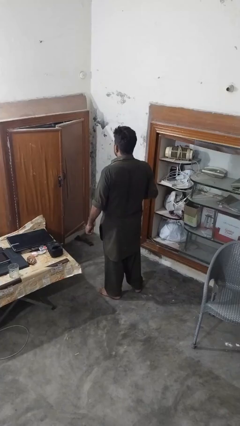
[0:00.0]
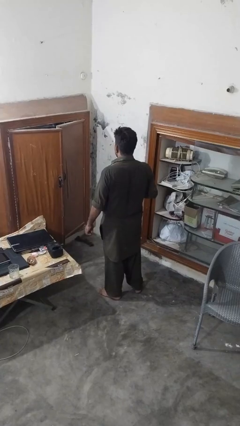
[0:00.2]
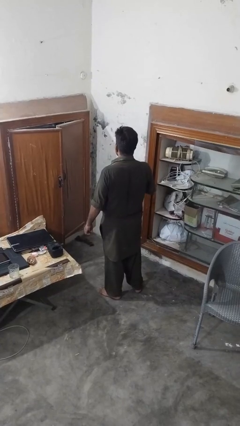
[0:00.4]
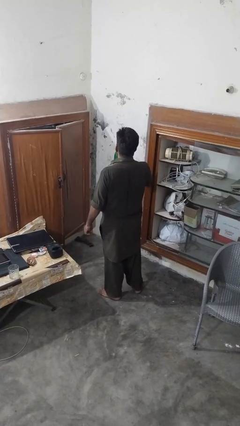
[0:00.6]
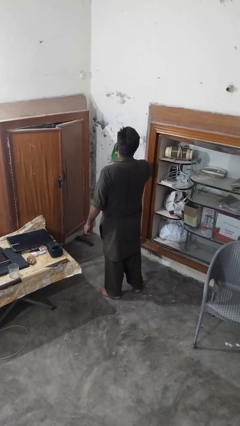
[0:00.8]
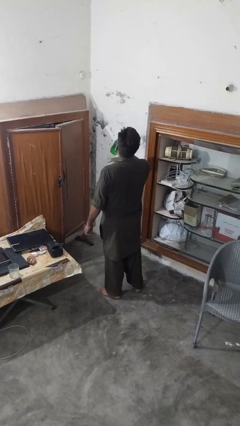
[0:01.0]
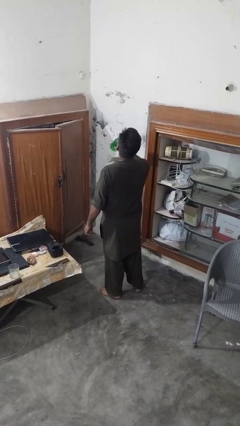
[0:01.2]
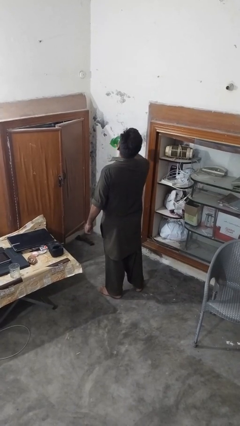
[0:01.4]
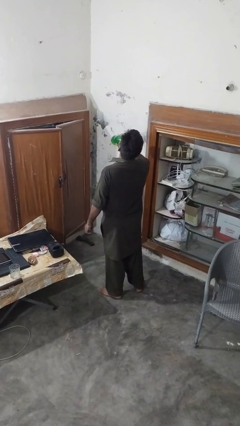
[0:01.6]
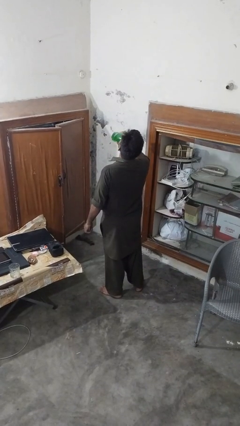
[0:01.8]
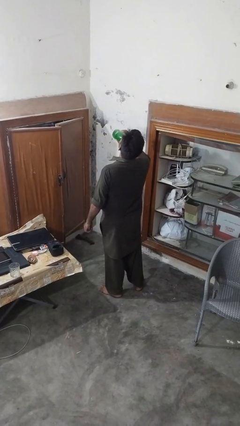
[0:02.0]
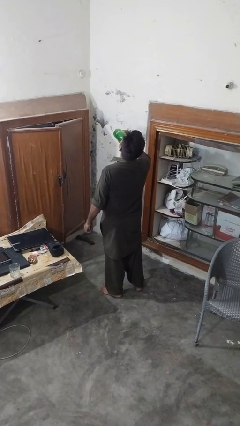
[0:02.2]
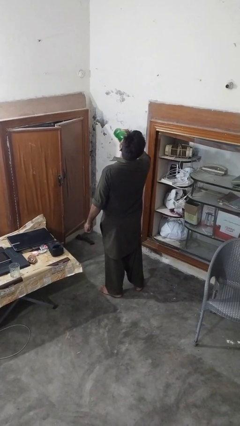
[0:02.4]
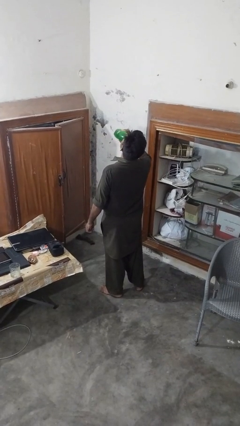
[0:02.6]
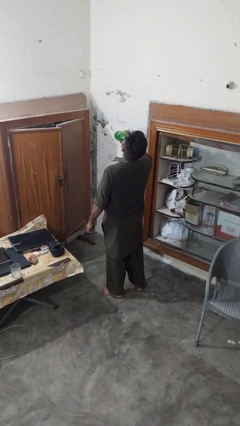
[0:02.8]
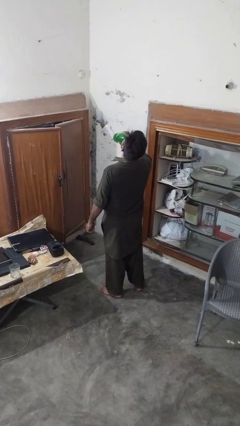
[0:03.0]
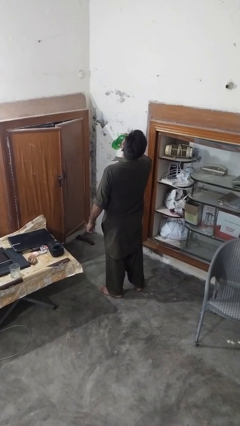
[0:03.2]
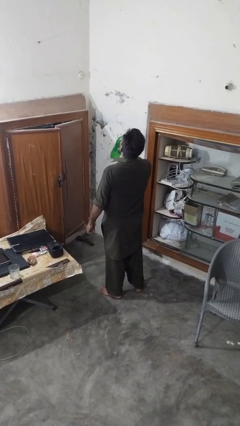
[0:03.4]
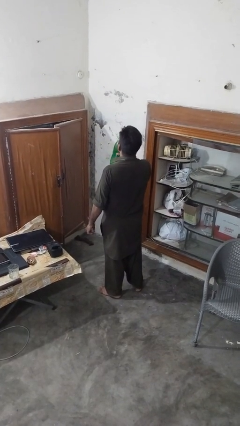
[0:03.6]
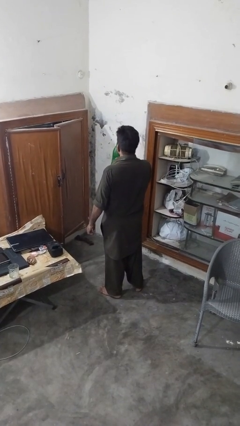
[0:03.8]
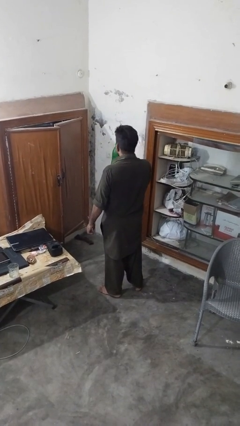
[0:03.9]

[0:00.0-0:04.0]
person drinks from bottle

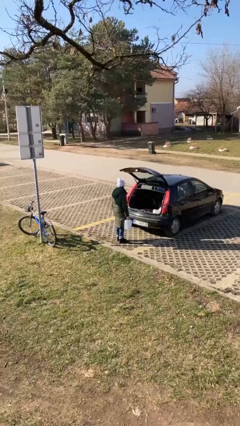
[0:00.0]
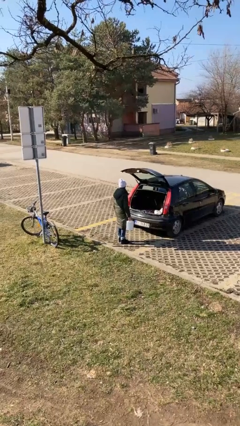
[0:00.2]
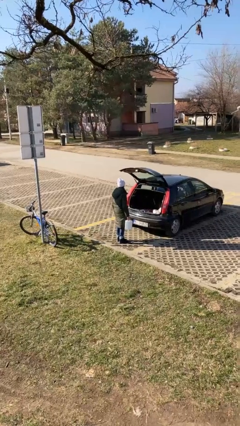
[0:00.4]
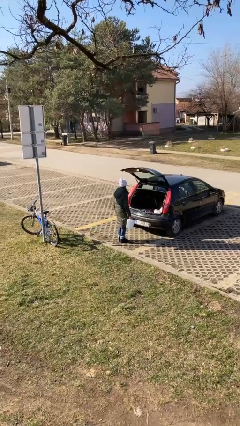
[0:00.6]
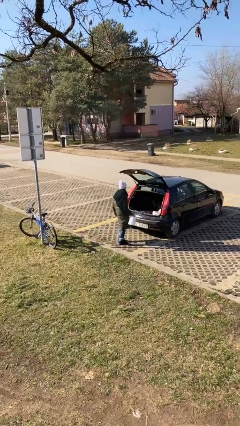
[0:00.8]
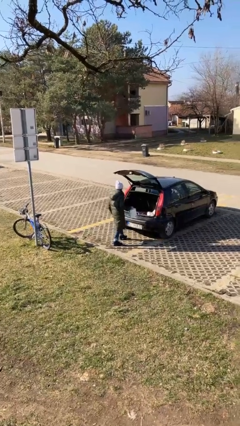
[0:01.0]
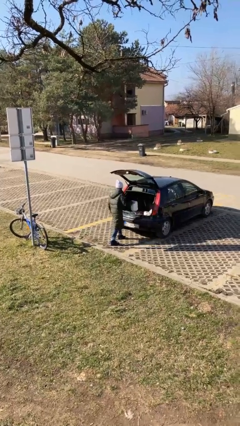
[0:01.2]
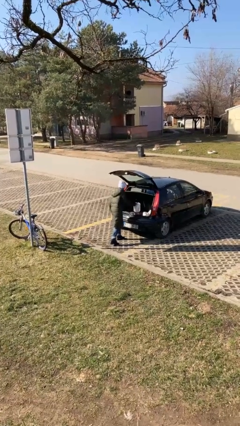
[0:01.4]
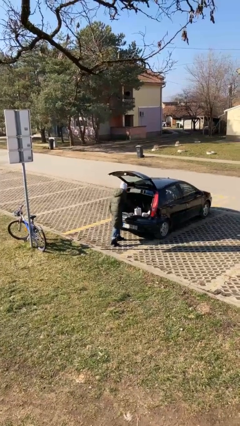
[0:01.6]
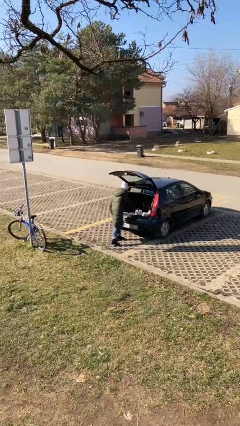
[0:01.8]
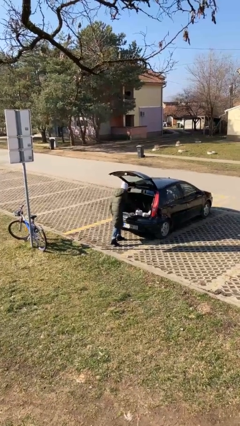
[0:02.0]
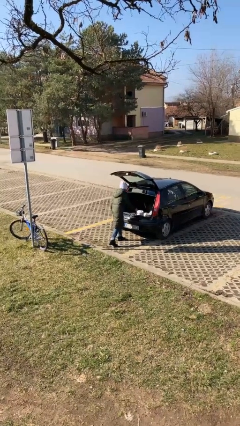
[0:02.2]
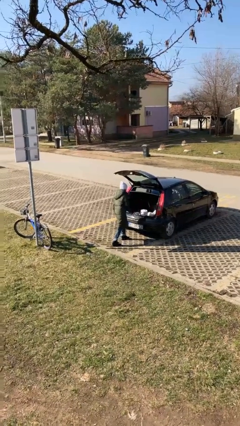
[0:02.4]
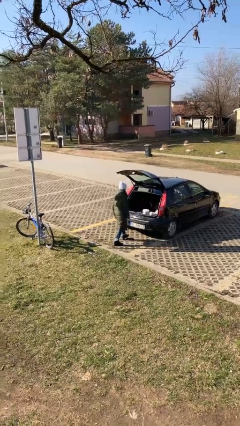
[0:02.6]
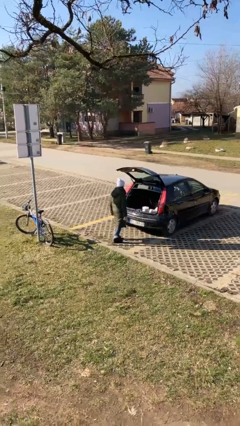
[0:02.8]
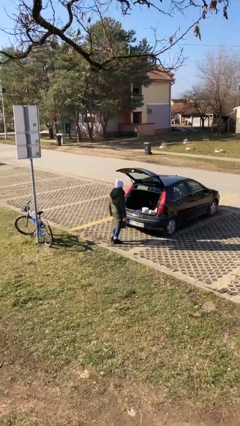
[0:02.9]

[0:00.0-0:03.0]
person loads car

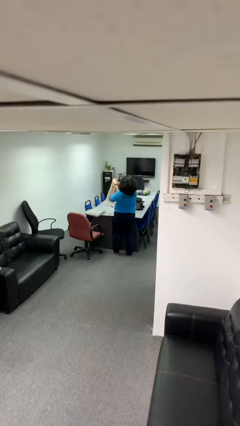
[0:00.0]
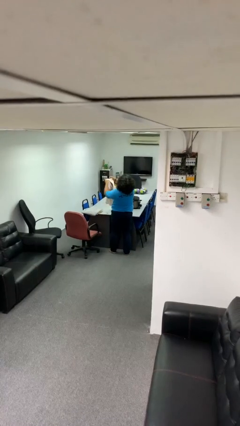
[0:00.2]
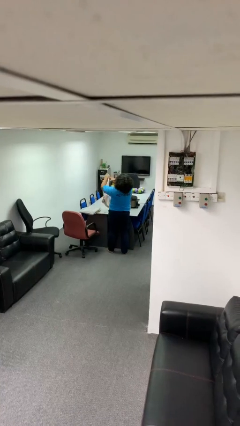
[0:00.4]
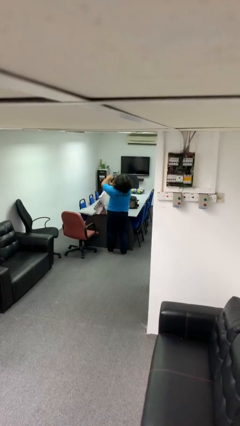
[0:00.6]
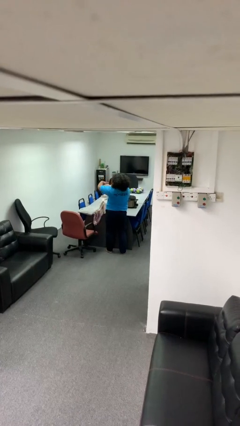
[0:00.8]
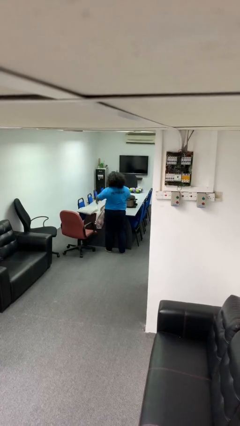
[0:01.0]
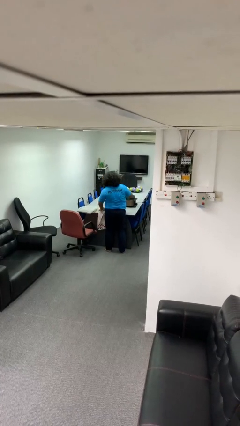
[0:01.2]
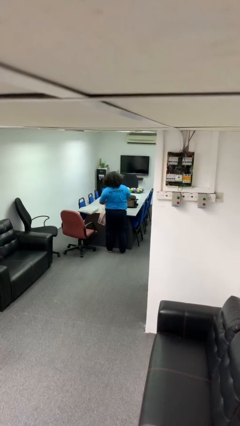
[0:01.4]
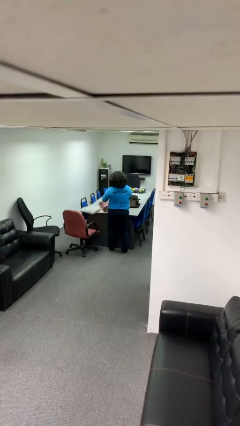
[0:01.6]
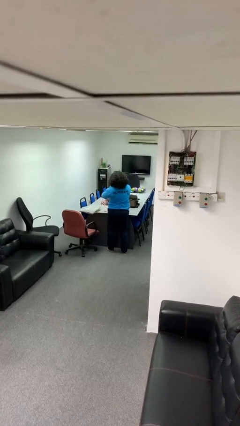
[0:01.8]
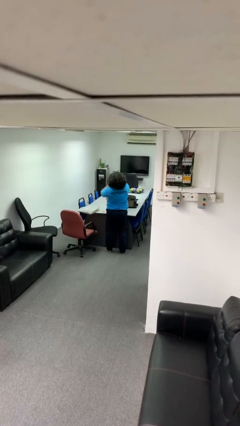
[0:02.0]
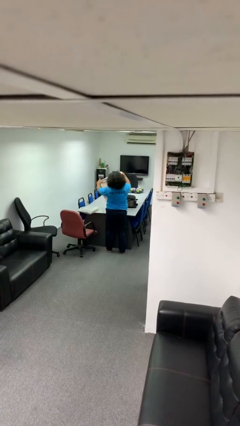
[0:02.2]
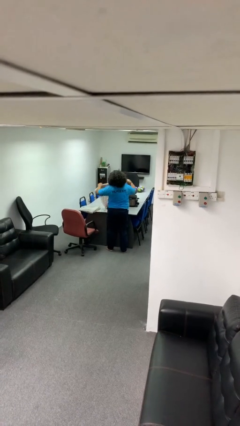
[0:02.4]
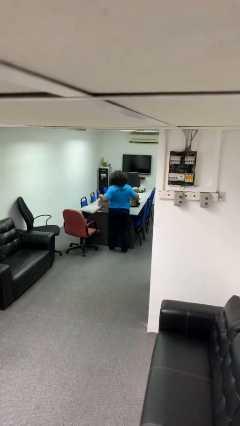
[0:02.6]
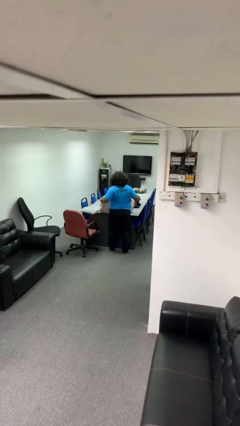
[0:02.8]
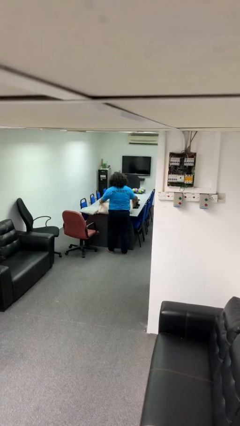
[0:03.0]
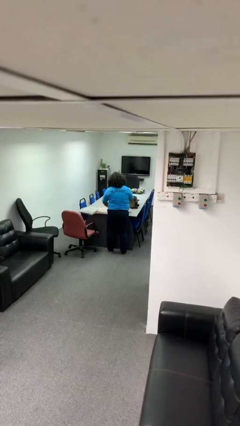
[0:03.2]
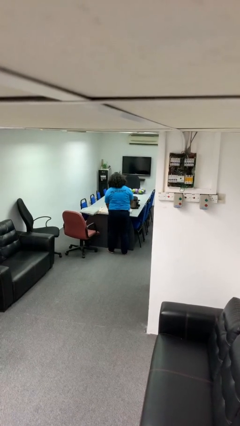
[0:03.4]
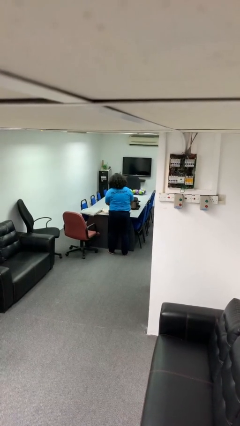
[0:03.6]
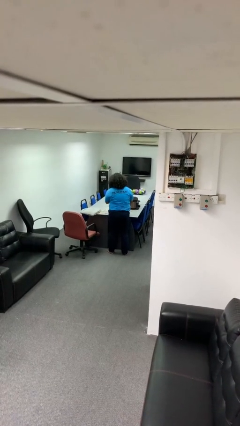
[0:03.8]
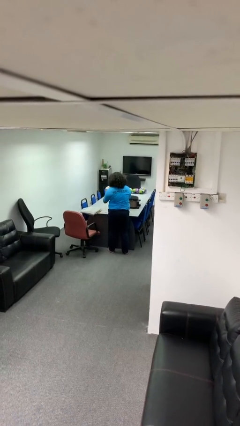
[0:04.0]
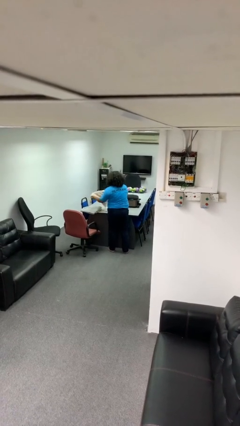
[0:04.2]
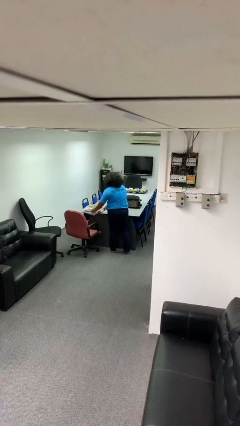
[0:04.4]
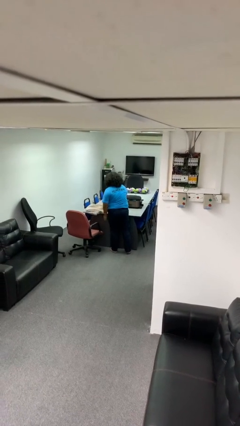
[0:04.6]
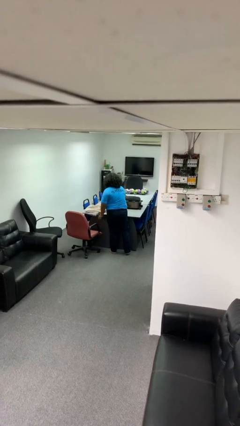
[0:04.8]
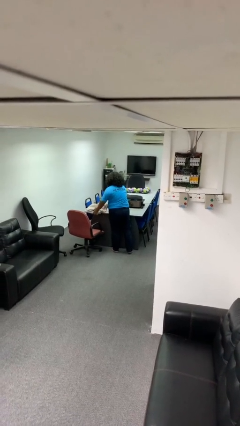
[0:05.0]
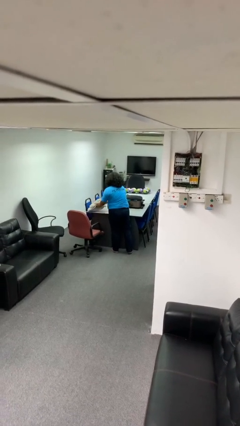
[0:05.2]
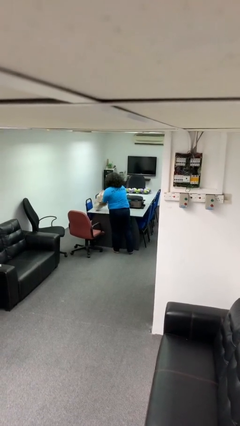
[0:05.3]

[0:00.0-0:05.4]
person folds towel

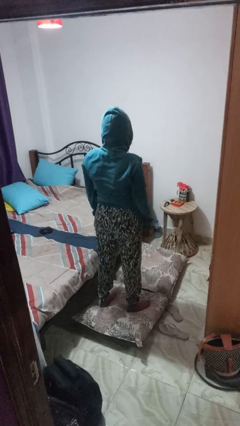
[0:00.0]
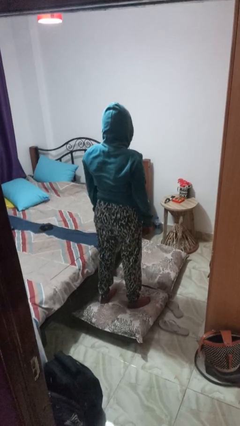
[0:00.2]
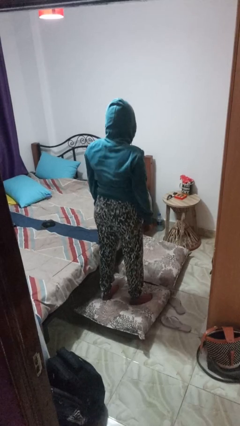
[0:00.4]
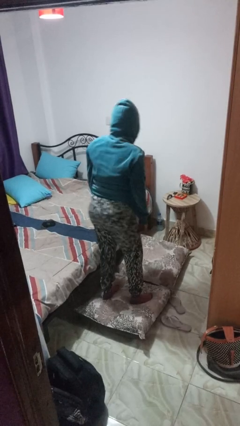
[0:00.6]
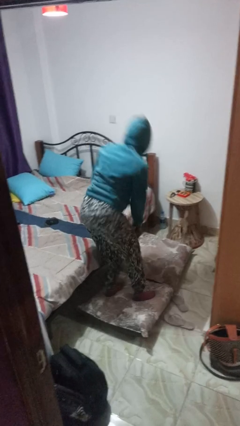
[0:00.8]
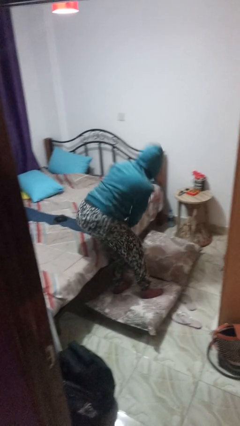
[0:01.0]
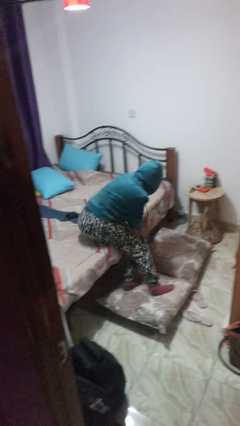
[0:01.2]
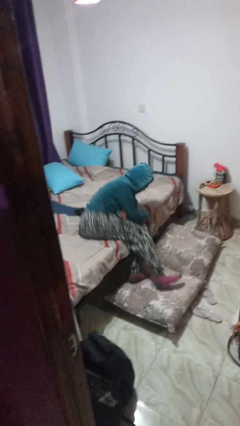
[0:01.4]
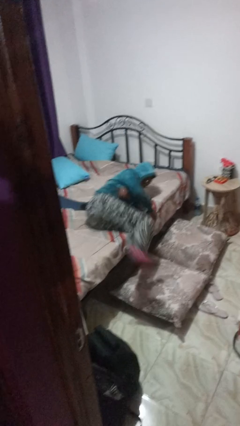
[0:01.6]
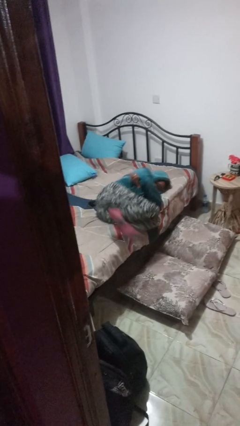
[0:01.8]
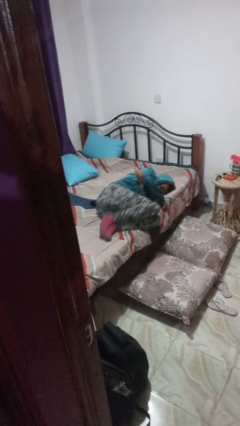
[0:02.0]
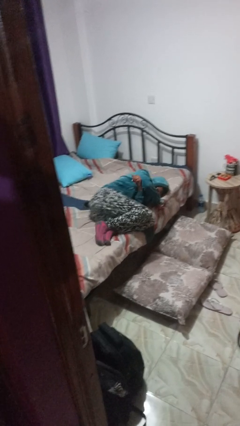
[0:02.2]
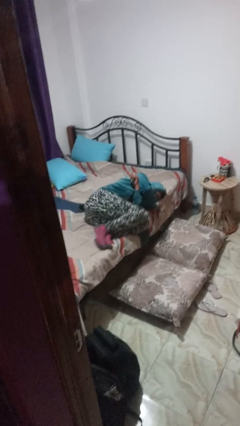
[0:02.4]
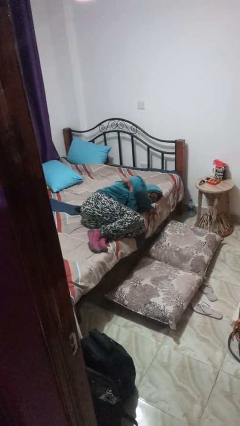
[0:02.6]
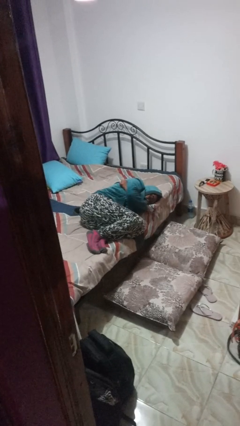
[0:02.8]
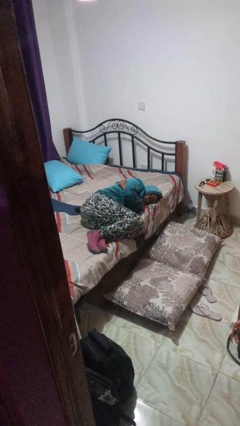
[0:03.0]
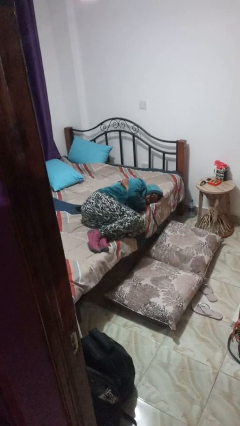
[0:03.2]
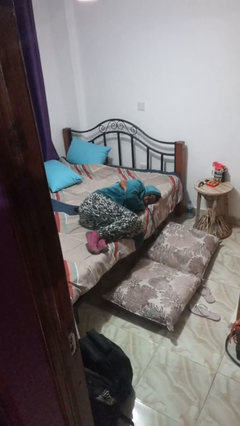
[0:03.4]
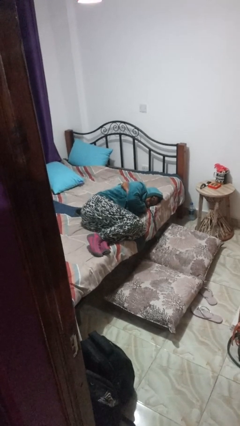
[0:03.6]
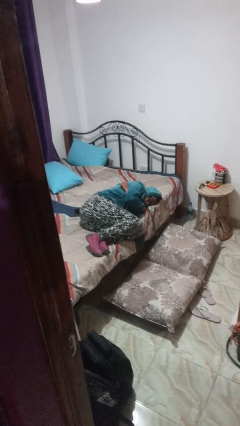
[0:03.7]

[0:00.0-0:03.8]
person lies down on bed

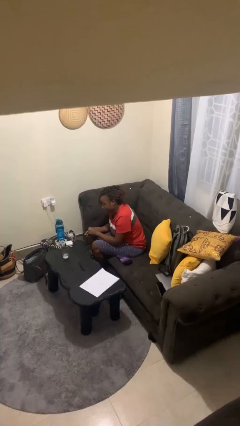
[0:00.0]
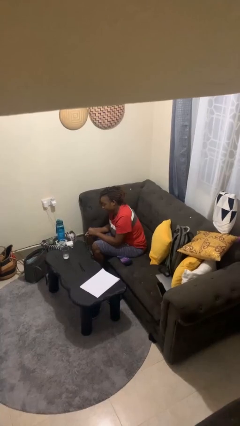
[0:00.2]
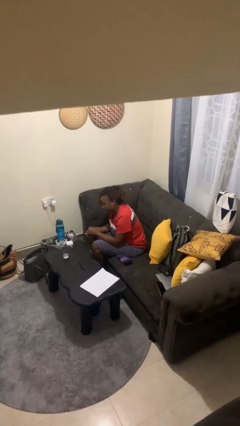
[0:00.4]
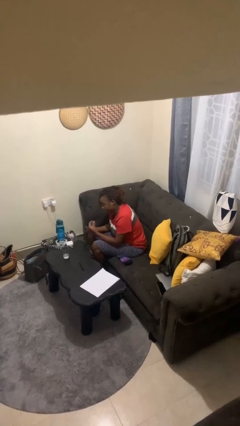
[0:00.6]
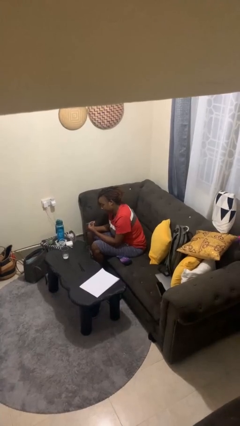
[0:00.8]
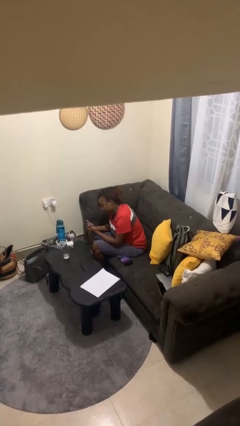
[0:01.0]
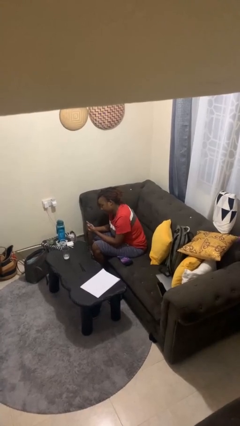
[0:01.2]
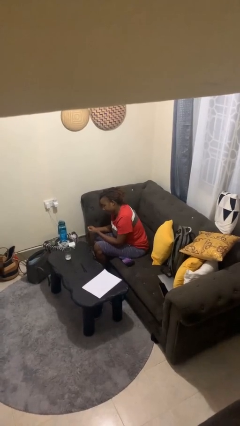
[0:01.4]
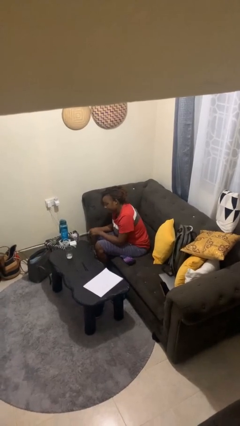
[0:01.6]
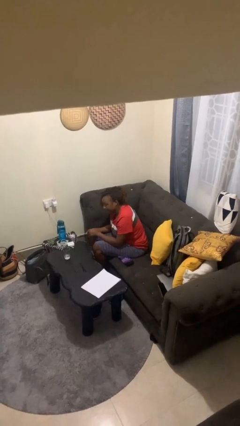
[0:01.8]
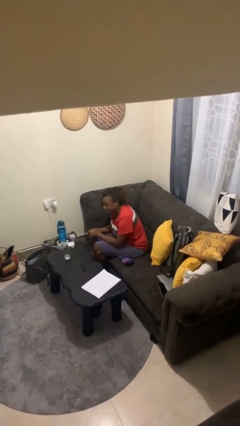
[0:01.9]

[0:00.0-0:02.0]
person snaps fingers
